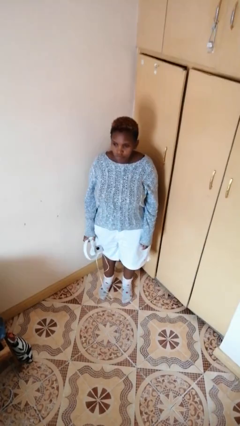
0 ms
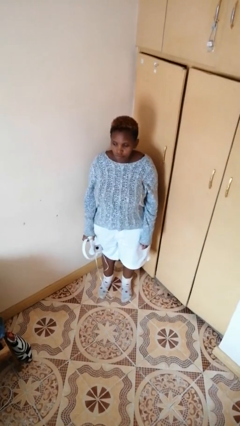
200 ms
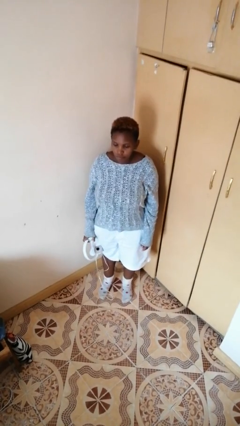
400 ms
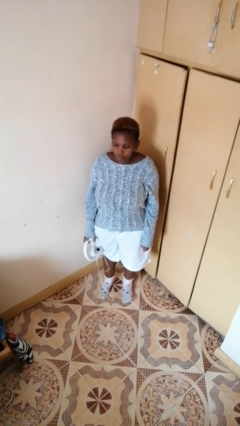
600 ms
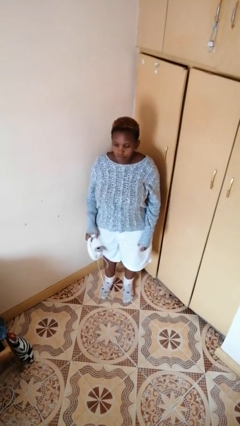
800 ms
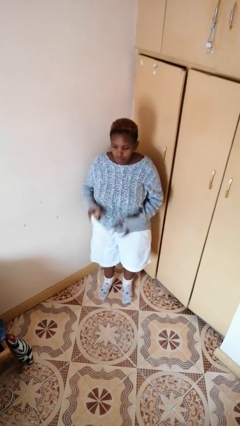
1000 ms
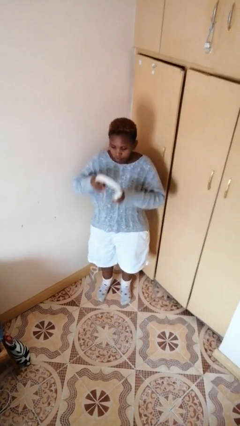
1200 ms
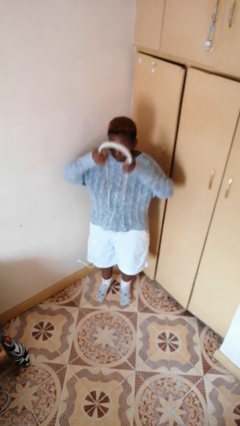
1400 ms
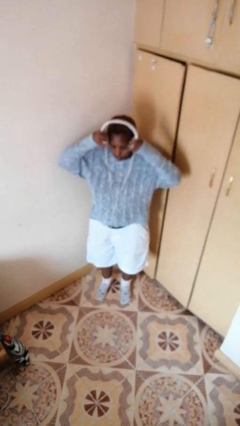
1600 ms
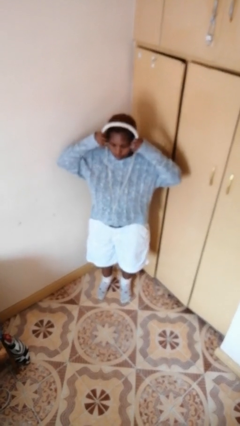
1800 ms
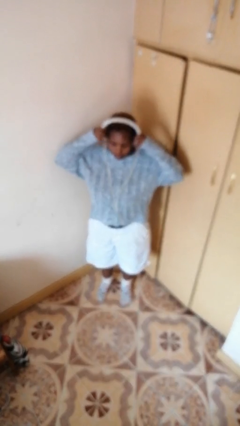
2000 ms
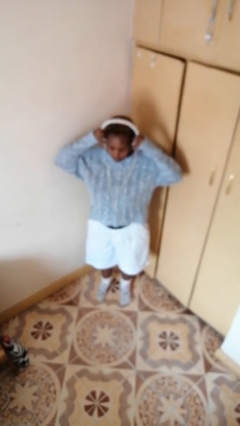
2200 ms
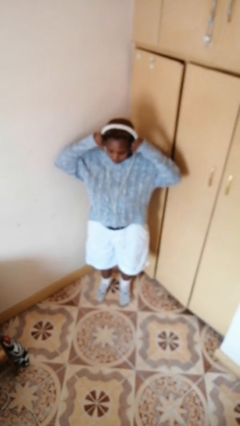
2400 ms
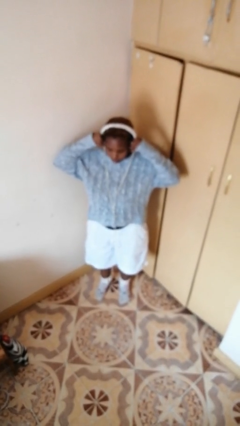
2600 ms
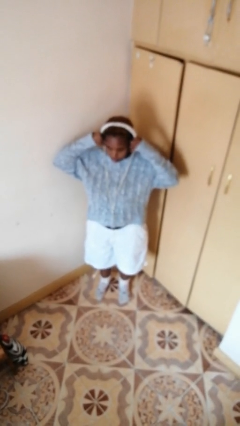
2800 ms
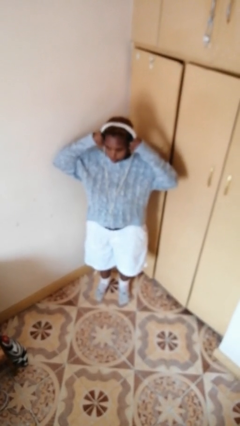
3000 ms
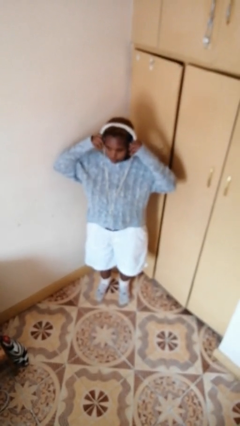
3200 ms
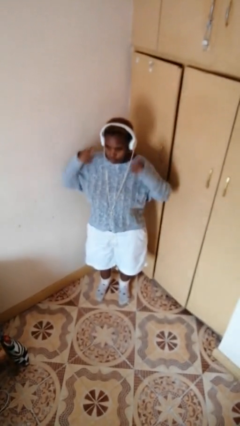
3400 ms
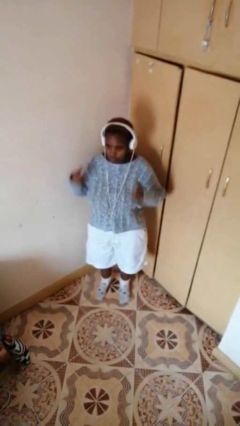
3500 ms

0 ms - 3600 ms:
person puts on headphones

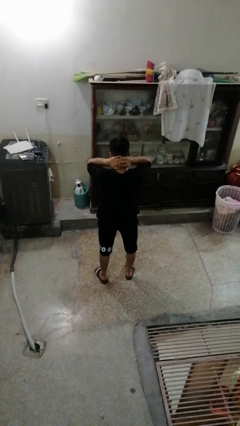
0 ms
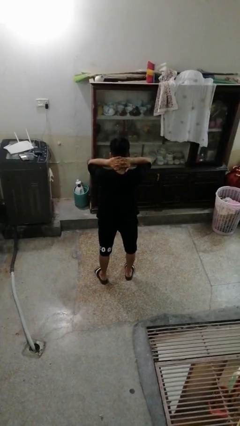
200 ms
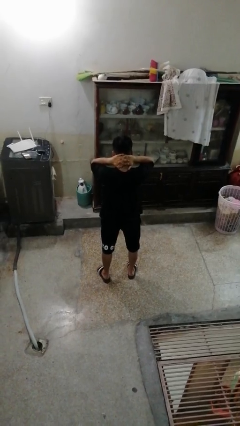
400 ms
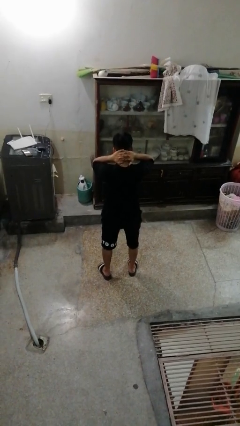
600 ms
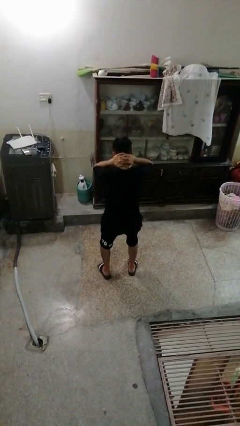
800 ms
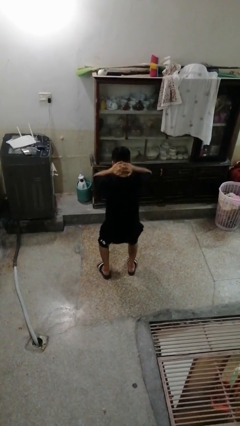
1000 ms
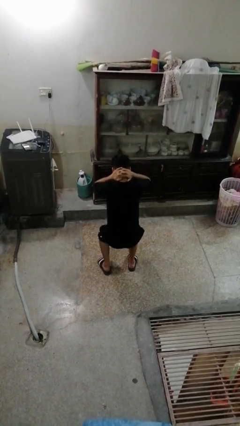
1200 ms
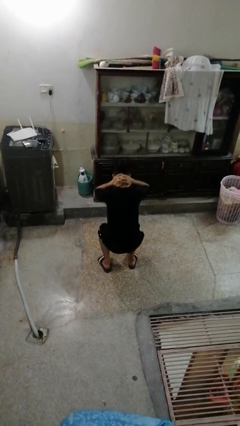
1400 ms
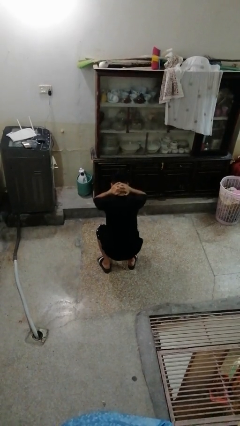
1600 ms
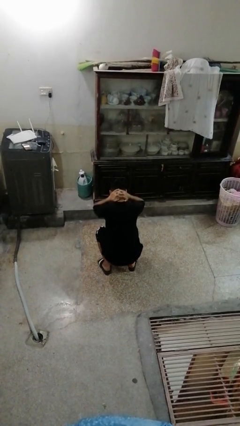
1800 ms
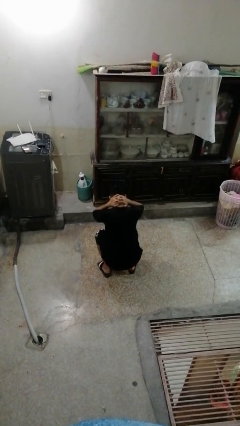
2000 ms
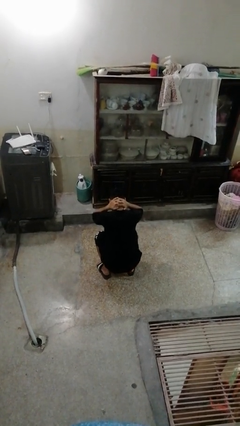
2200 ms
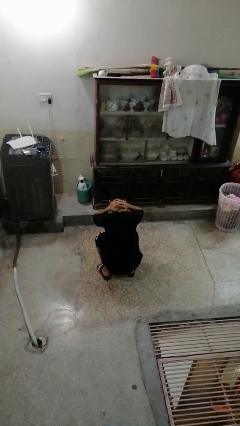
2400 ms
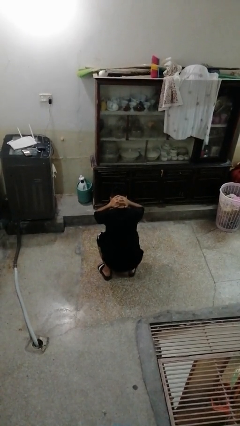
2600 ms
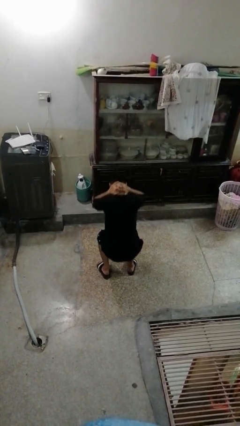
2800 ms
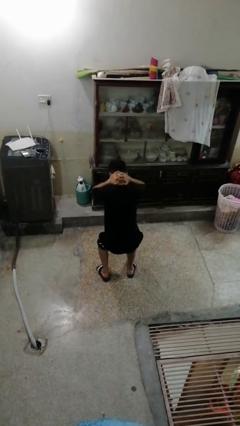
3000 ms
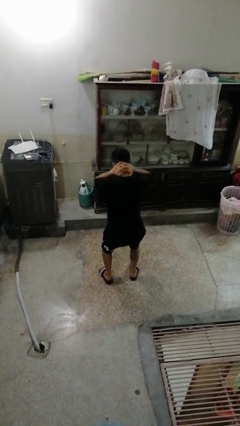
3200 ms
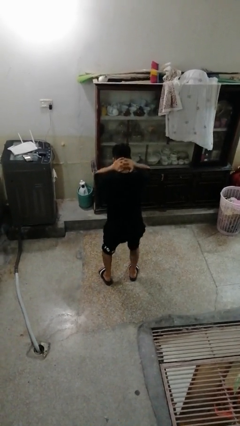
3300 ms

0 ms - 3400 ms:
person exercises with situp

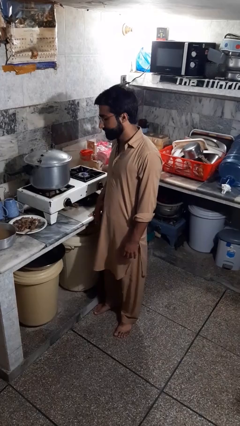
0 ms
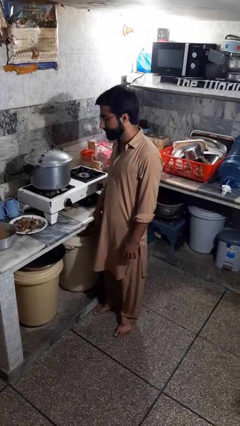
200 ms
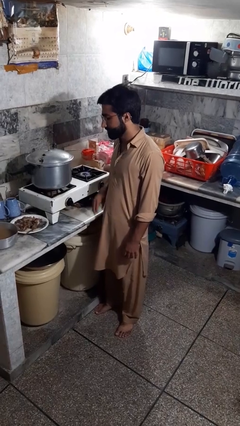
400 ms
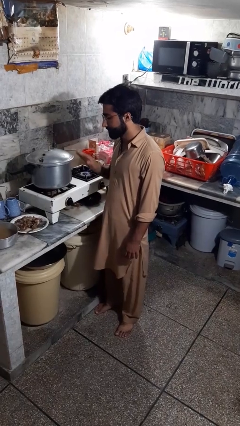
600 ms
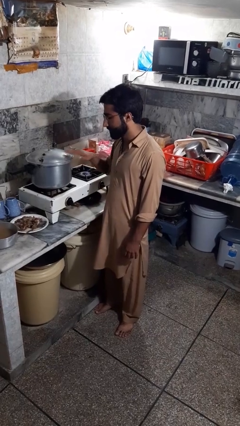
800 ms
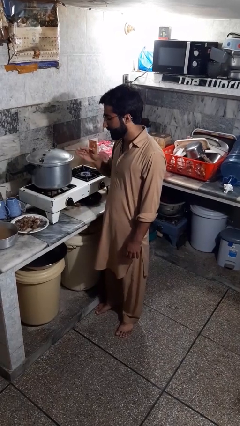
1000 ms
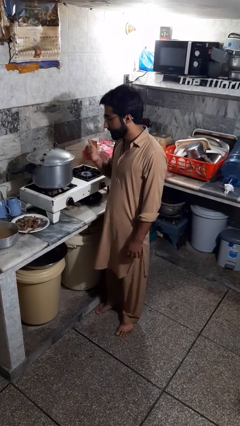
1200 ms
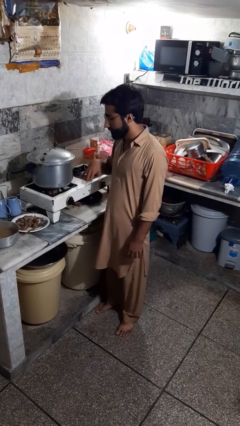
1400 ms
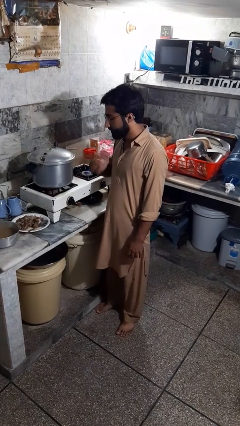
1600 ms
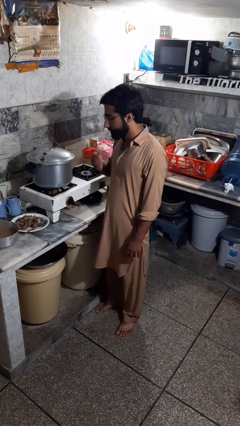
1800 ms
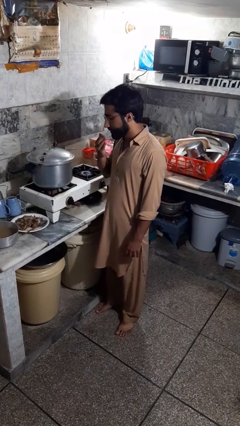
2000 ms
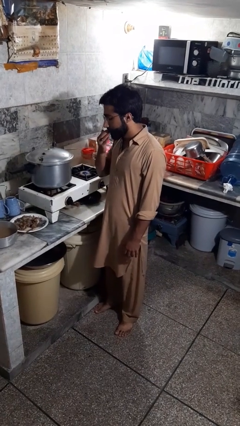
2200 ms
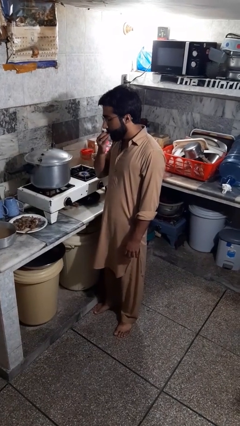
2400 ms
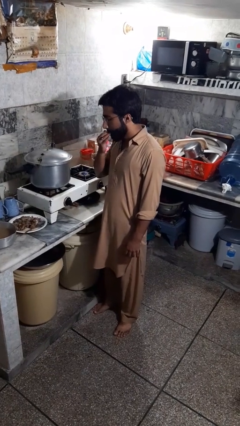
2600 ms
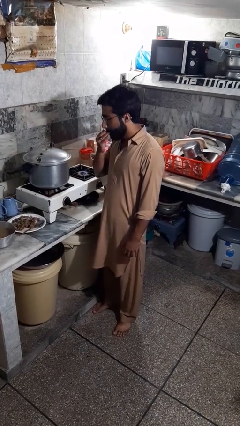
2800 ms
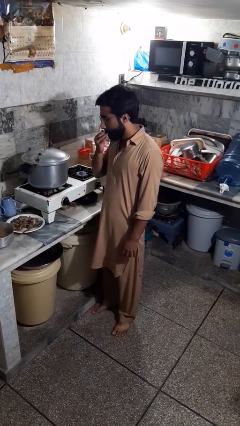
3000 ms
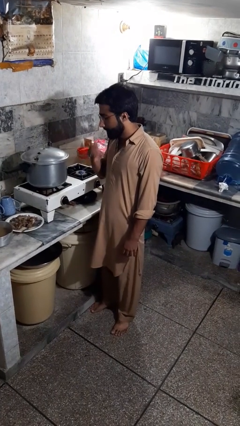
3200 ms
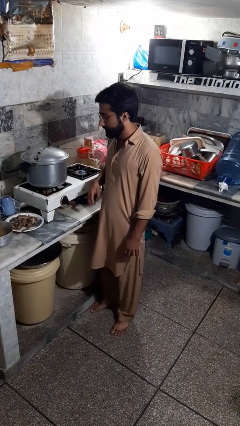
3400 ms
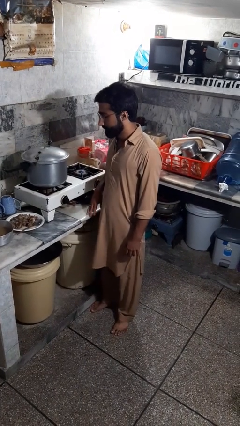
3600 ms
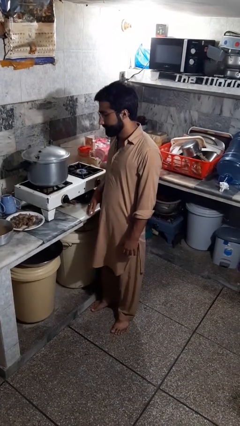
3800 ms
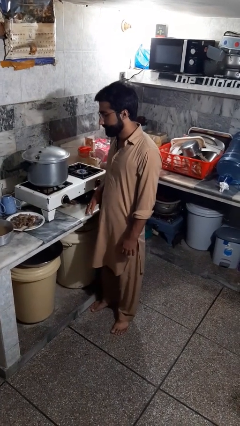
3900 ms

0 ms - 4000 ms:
person burns hand

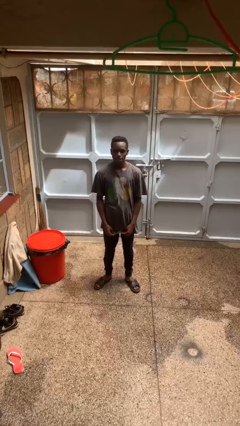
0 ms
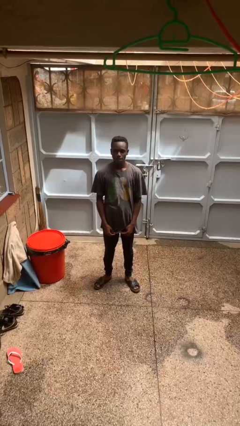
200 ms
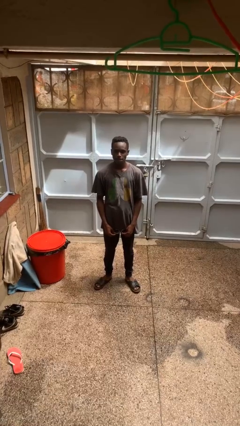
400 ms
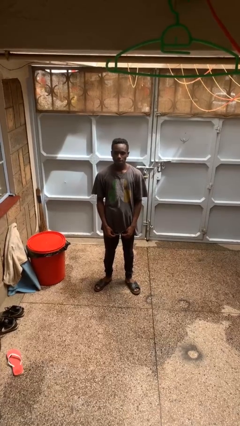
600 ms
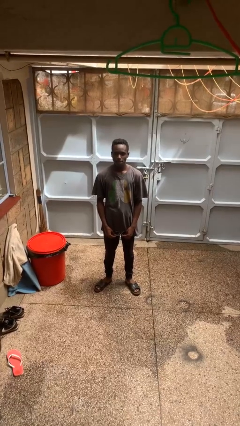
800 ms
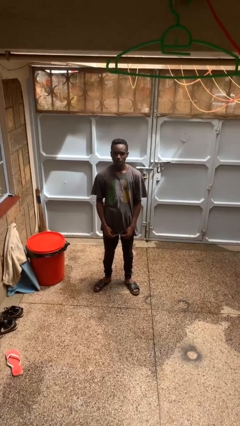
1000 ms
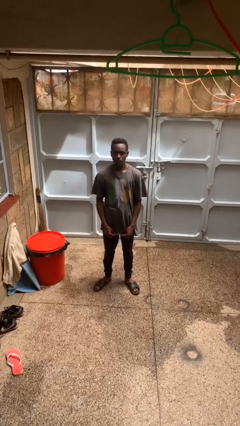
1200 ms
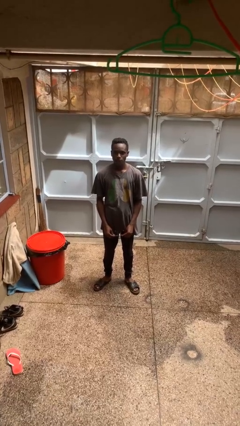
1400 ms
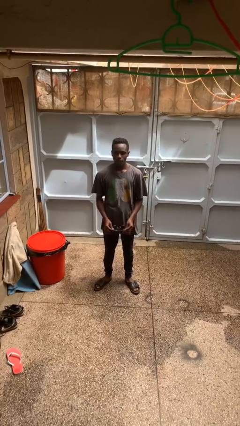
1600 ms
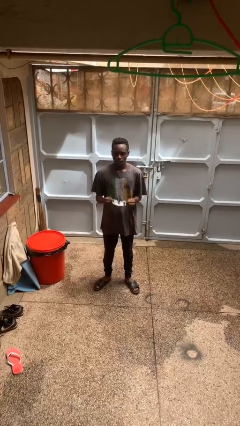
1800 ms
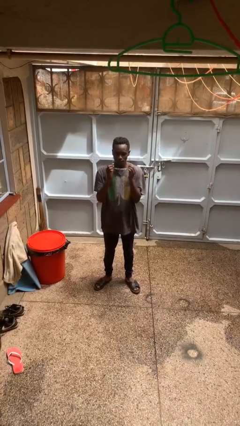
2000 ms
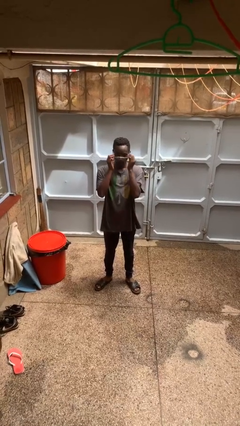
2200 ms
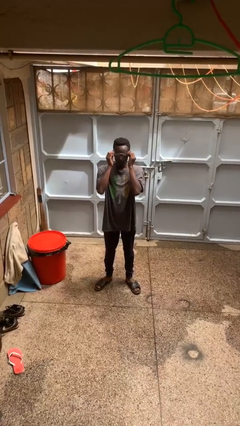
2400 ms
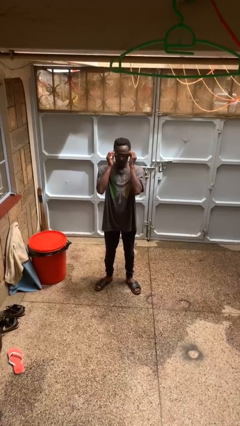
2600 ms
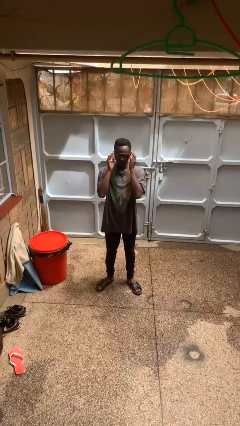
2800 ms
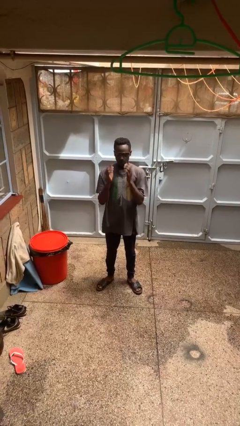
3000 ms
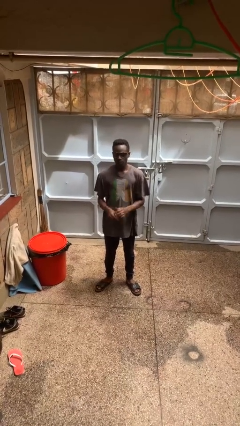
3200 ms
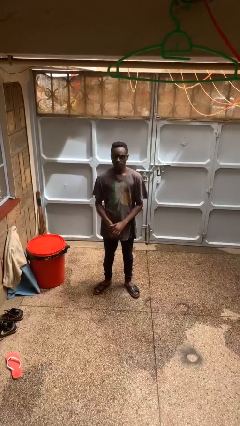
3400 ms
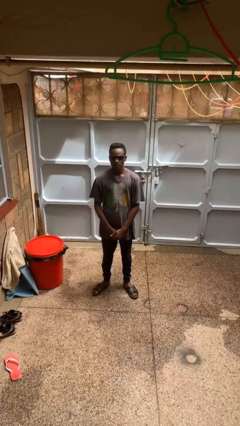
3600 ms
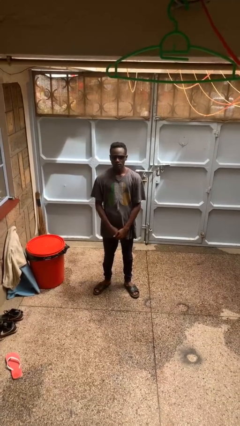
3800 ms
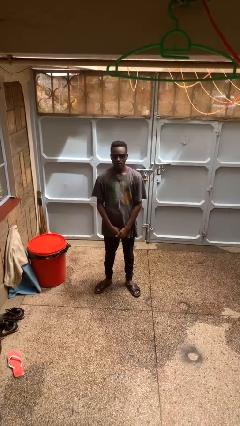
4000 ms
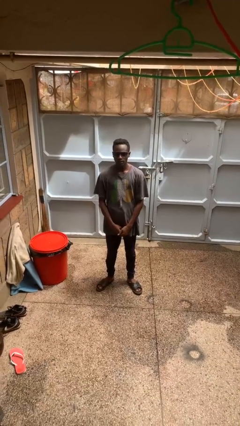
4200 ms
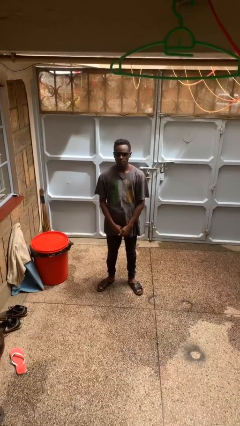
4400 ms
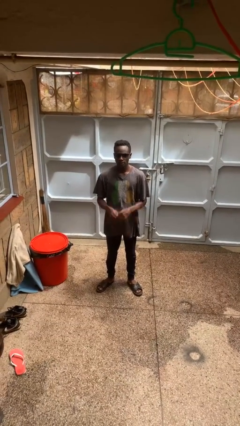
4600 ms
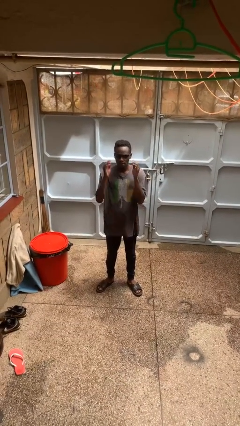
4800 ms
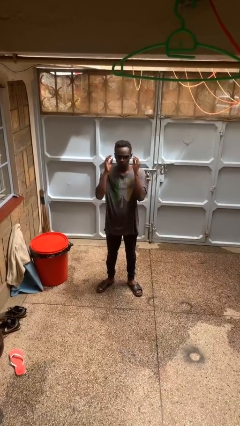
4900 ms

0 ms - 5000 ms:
person puts on sunglasses

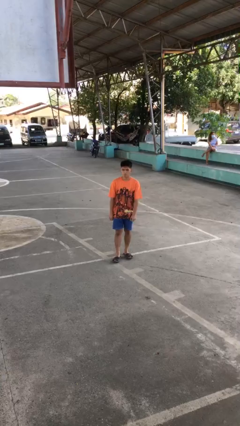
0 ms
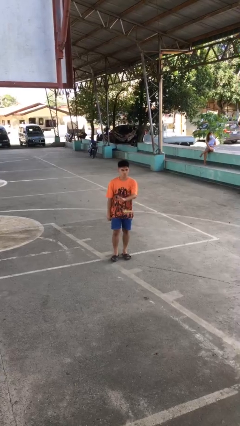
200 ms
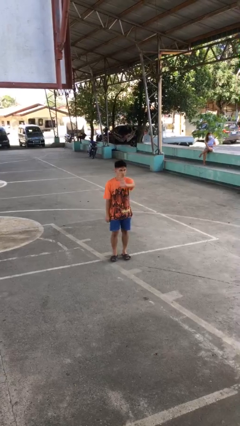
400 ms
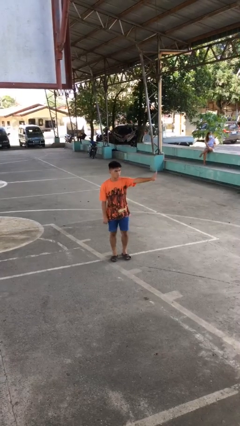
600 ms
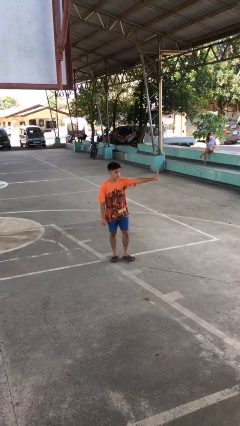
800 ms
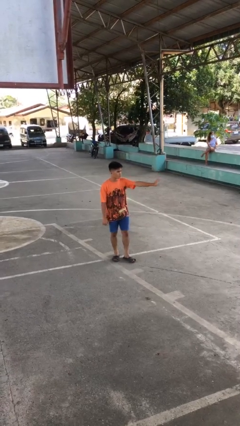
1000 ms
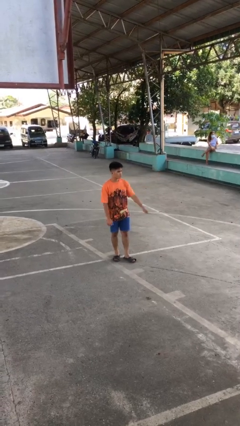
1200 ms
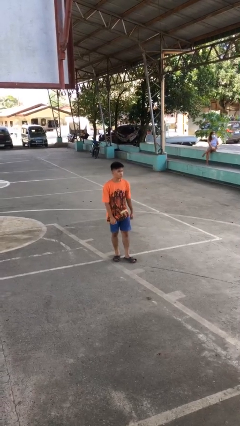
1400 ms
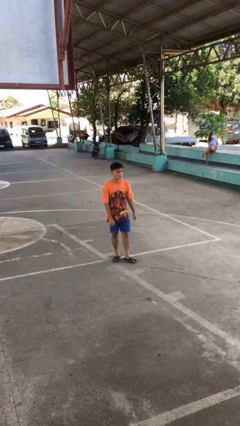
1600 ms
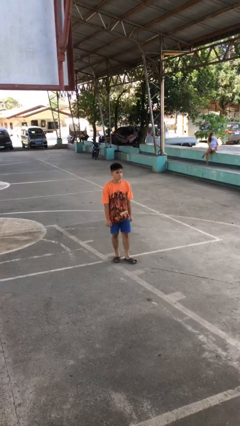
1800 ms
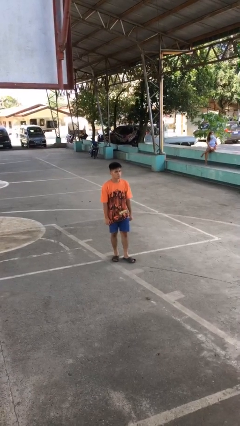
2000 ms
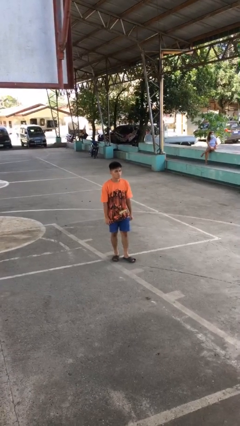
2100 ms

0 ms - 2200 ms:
person gestures swipe left
